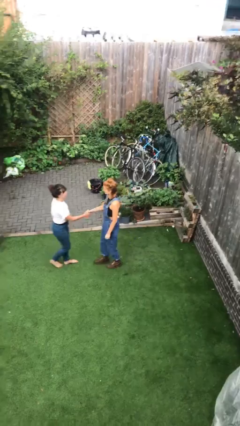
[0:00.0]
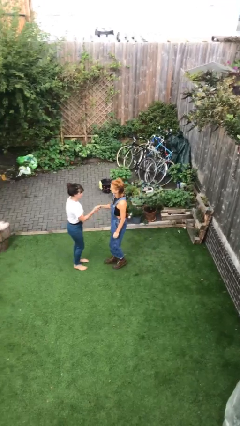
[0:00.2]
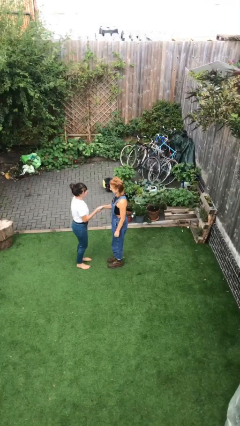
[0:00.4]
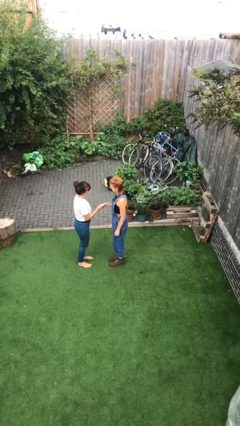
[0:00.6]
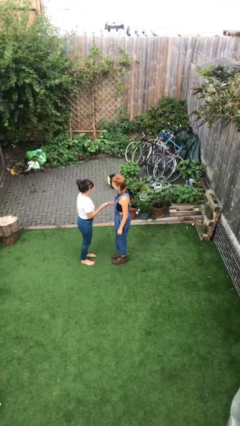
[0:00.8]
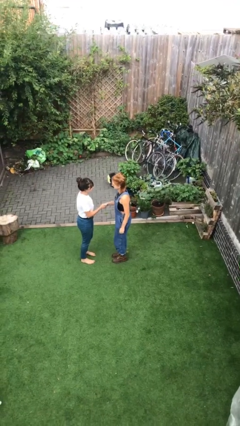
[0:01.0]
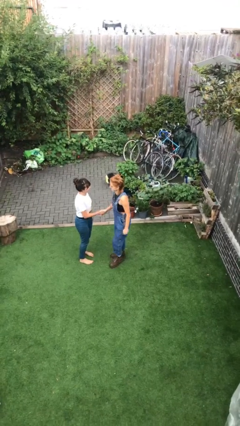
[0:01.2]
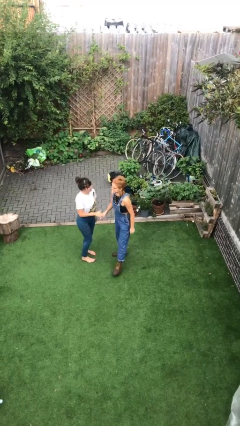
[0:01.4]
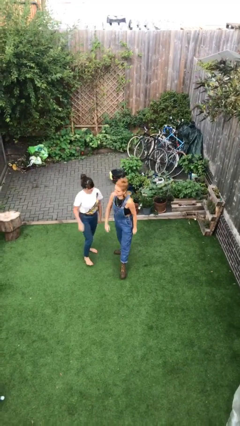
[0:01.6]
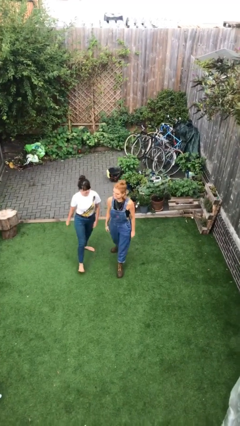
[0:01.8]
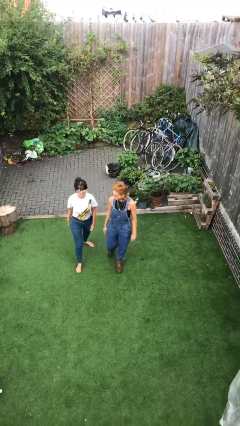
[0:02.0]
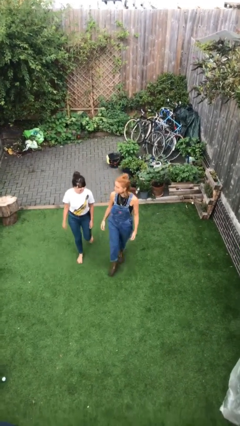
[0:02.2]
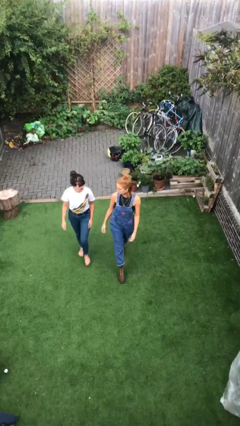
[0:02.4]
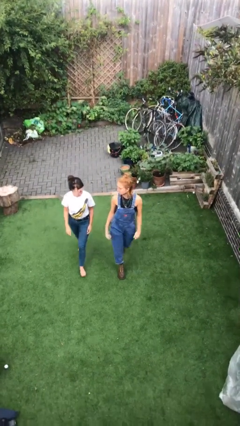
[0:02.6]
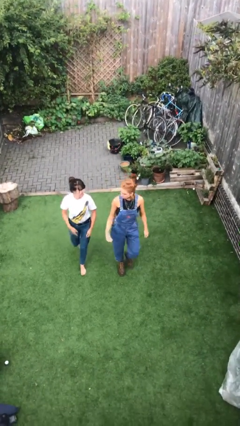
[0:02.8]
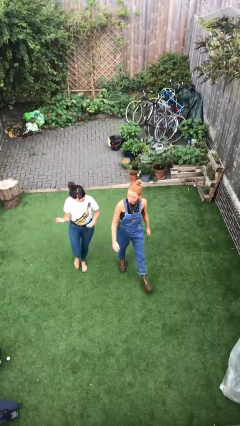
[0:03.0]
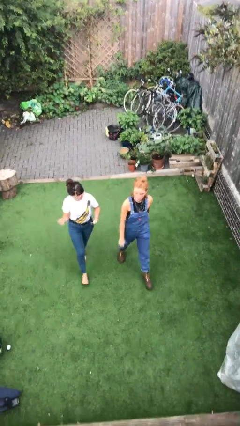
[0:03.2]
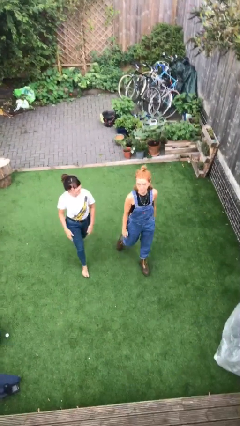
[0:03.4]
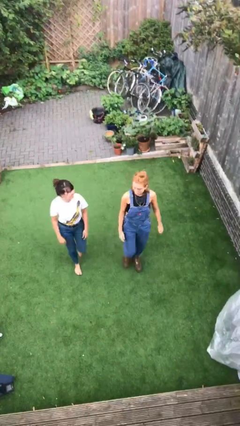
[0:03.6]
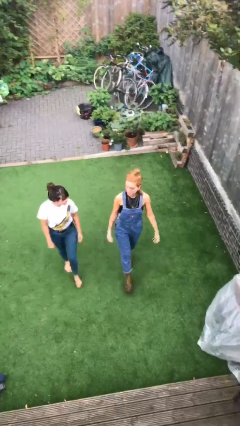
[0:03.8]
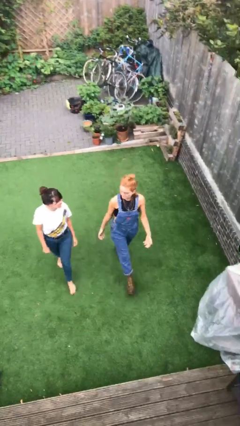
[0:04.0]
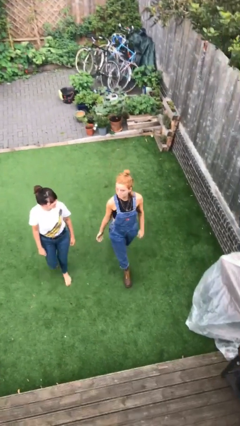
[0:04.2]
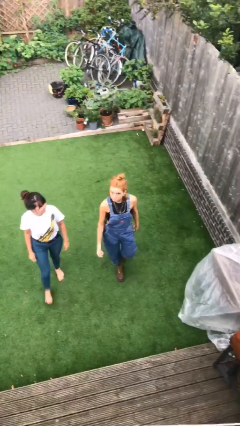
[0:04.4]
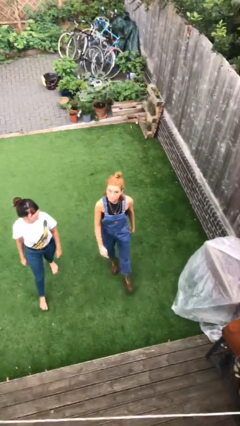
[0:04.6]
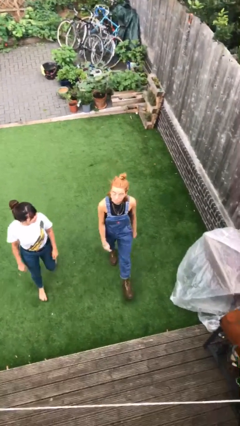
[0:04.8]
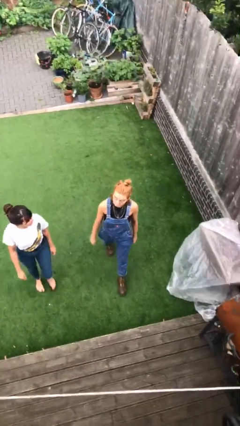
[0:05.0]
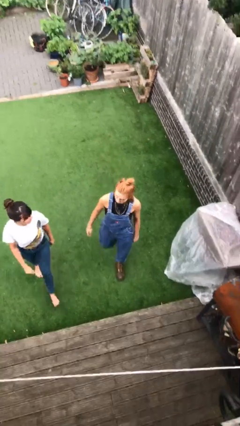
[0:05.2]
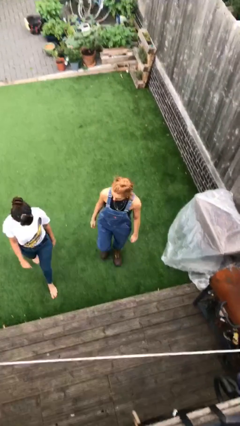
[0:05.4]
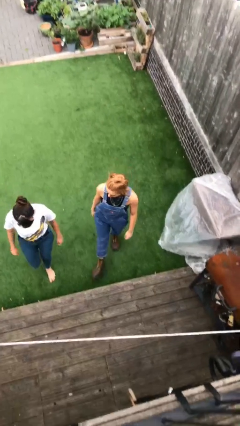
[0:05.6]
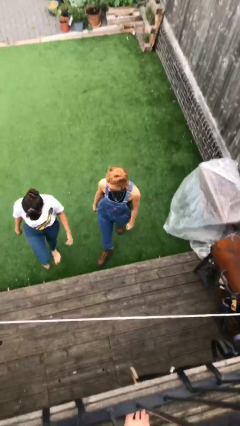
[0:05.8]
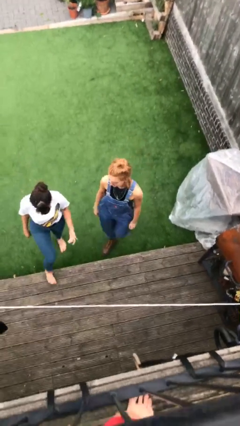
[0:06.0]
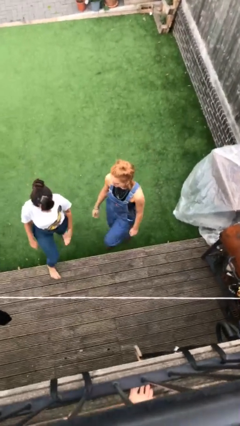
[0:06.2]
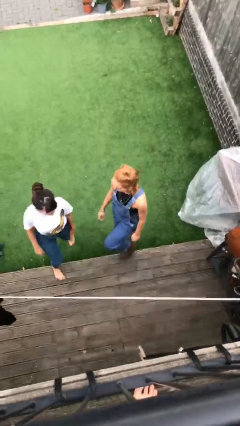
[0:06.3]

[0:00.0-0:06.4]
person shakes hand

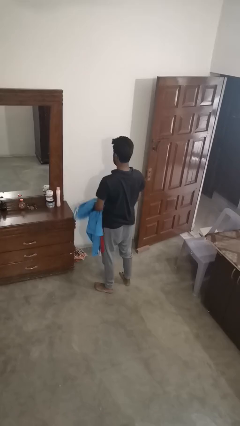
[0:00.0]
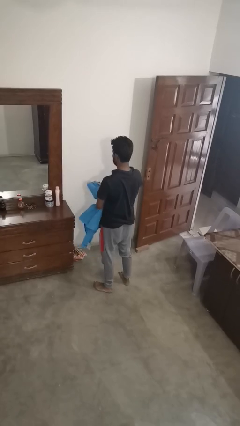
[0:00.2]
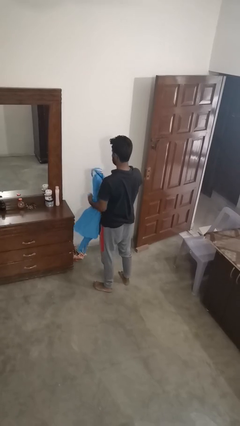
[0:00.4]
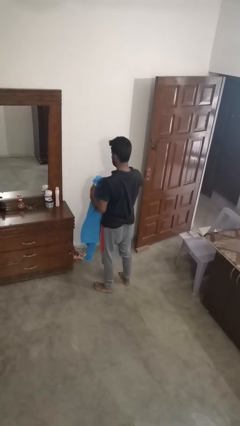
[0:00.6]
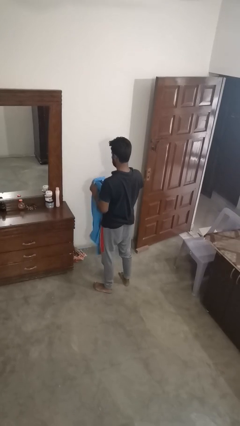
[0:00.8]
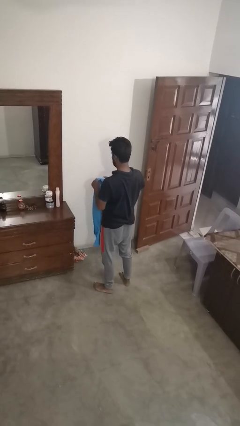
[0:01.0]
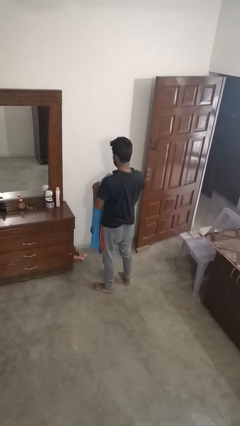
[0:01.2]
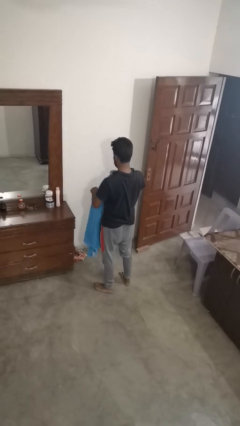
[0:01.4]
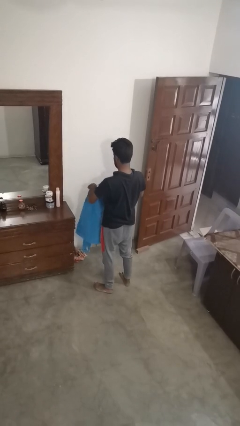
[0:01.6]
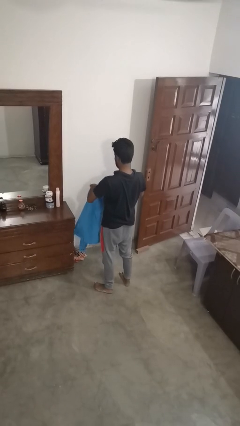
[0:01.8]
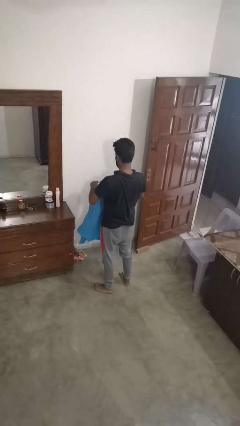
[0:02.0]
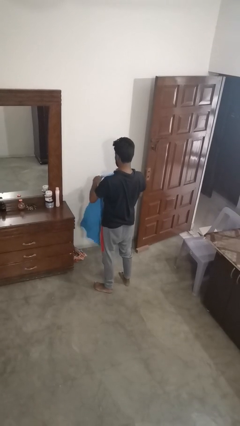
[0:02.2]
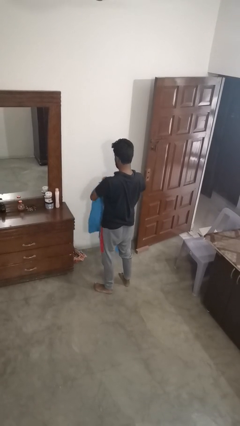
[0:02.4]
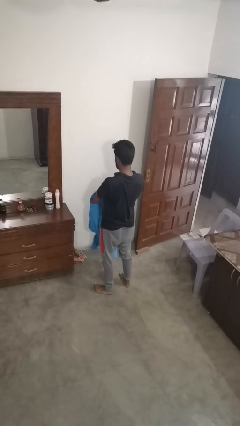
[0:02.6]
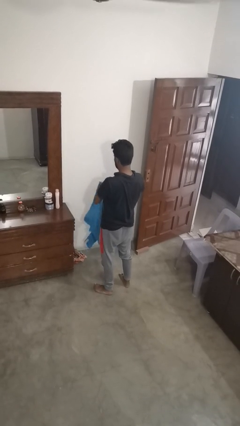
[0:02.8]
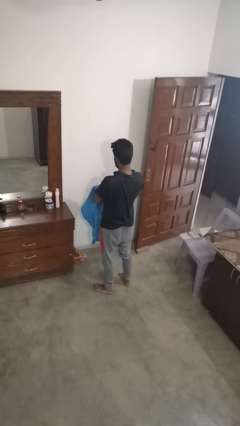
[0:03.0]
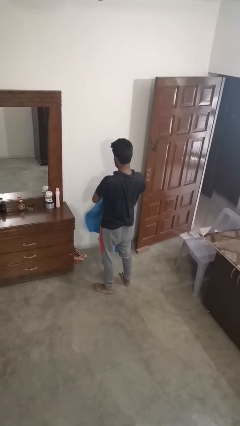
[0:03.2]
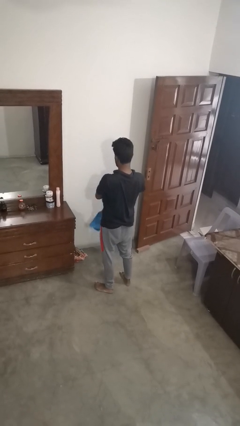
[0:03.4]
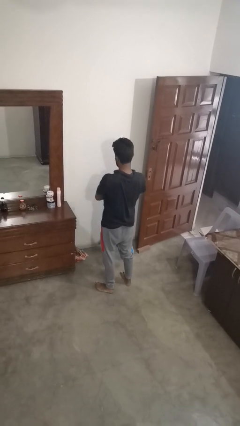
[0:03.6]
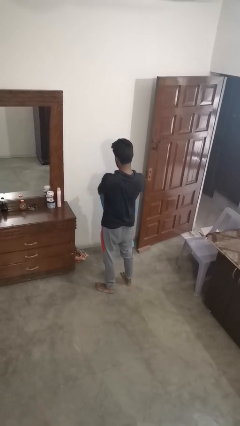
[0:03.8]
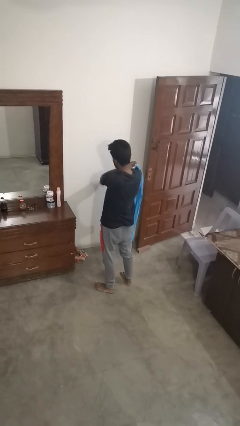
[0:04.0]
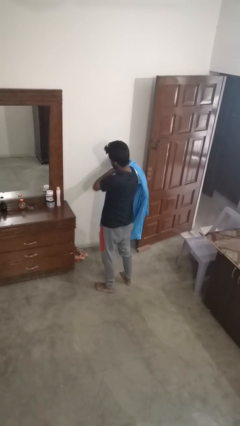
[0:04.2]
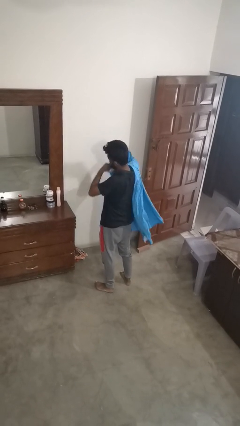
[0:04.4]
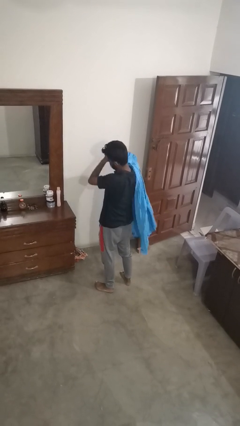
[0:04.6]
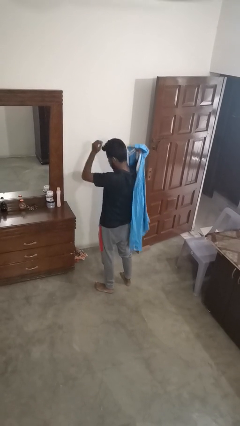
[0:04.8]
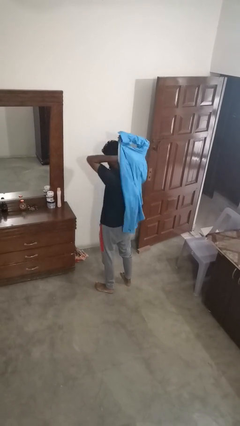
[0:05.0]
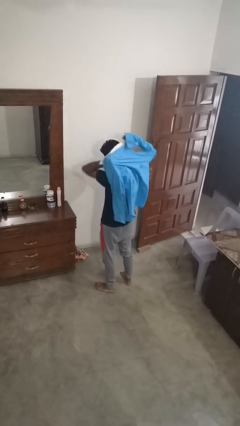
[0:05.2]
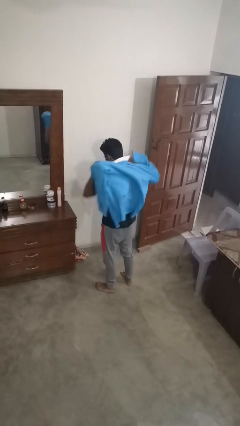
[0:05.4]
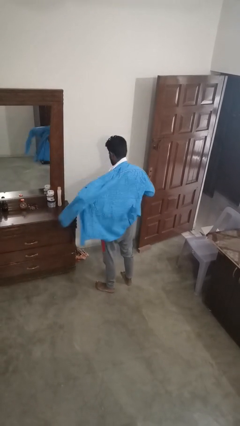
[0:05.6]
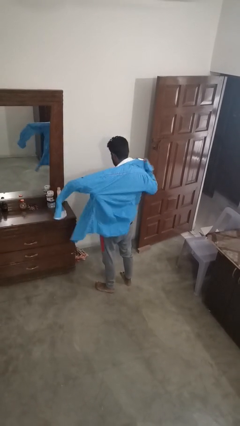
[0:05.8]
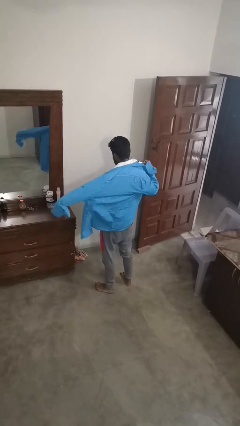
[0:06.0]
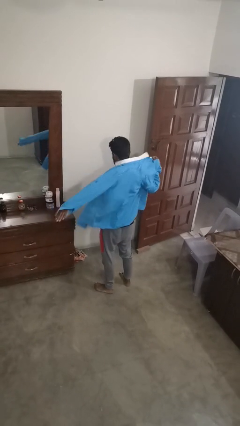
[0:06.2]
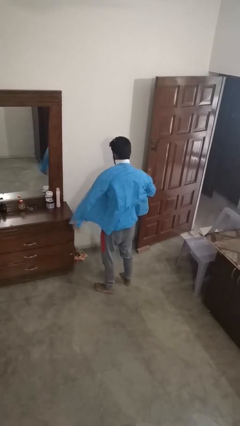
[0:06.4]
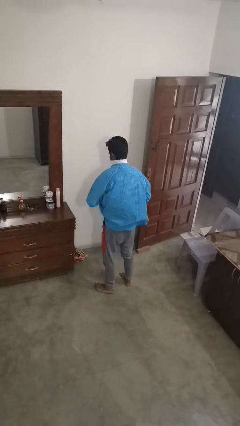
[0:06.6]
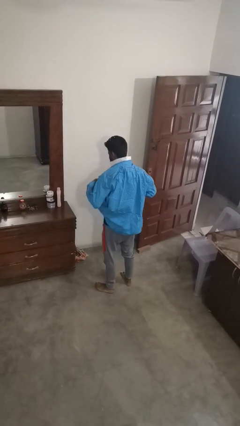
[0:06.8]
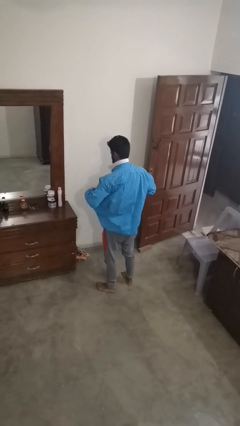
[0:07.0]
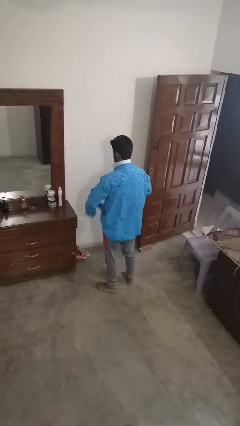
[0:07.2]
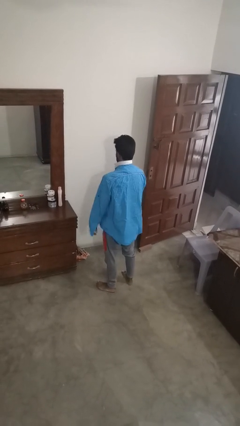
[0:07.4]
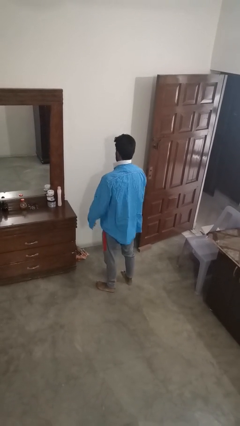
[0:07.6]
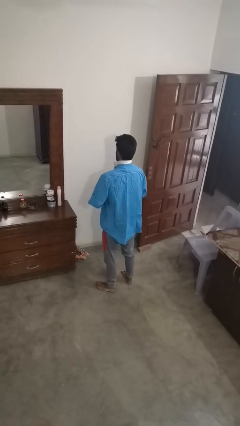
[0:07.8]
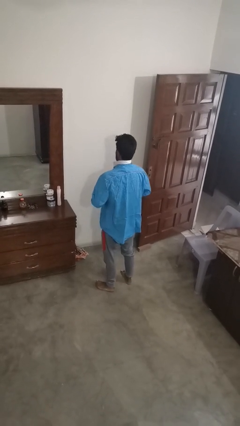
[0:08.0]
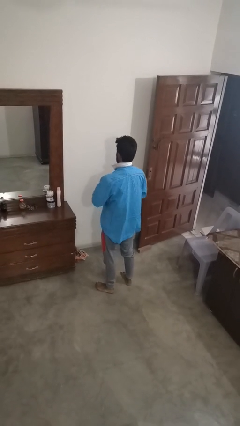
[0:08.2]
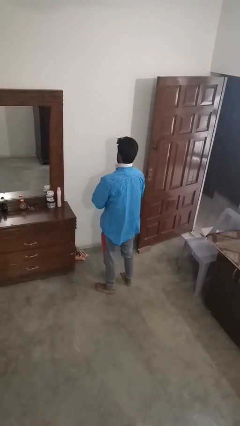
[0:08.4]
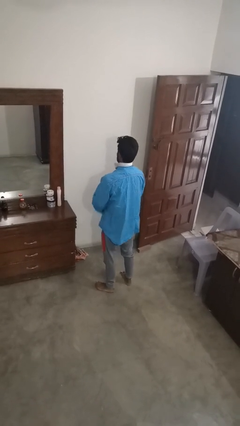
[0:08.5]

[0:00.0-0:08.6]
person puts on shirt

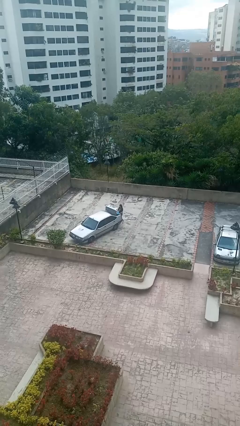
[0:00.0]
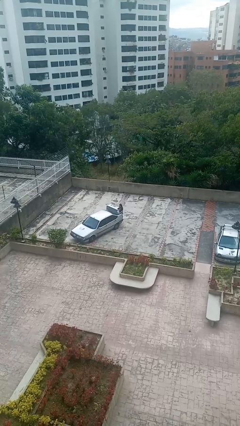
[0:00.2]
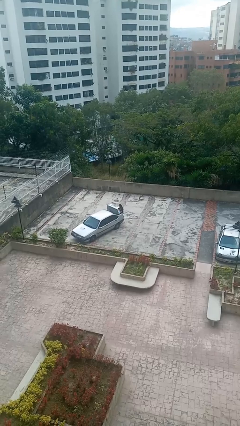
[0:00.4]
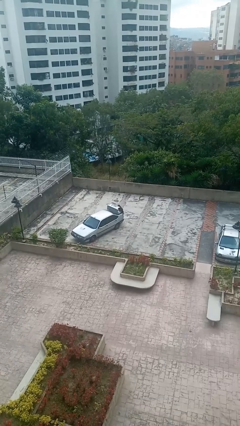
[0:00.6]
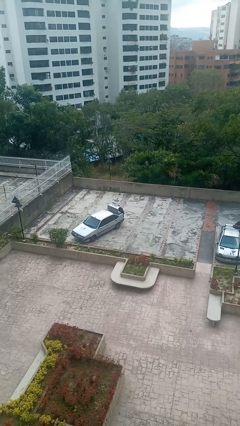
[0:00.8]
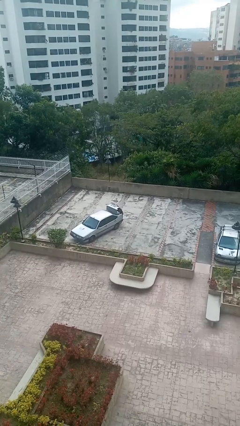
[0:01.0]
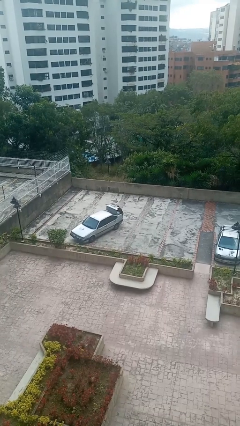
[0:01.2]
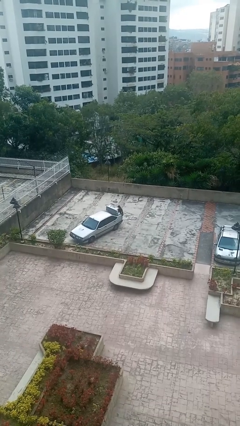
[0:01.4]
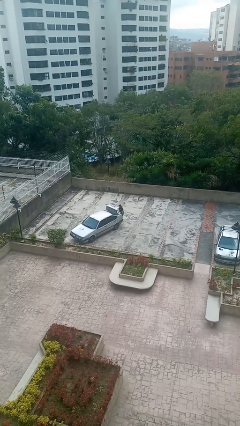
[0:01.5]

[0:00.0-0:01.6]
person loads car

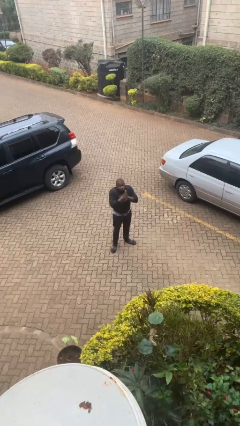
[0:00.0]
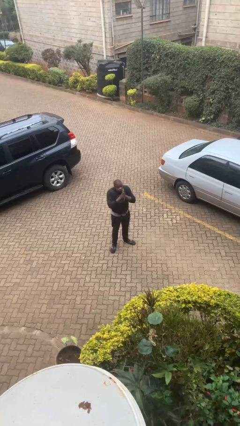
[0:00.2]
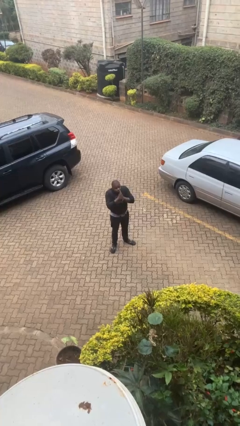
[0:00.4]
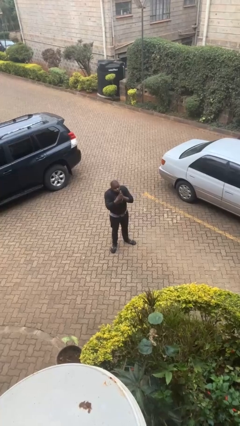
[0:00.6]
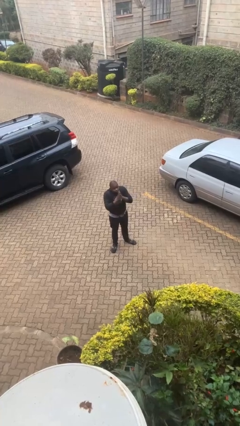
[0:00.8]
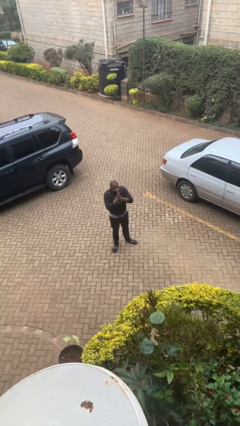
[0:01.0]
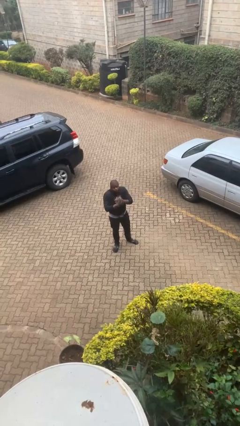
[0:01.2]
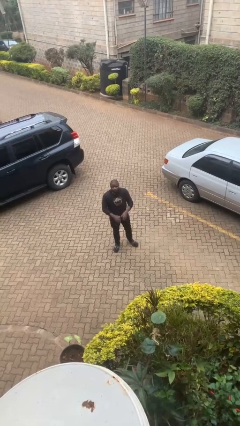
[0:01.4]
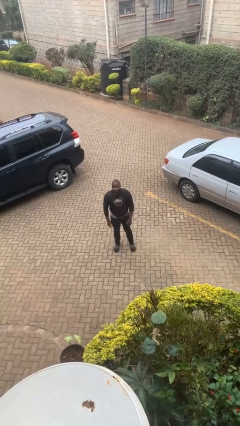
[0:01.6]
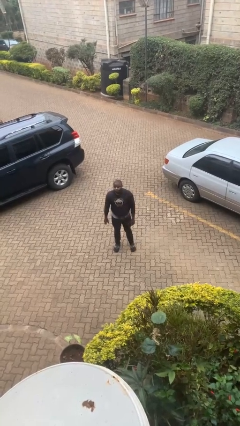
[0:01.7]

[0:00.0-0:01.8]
person blows into hands
